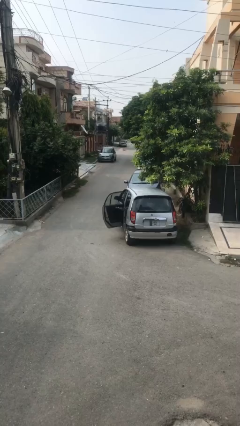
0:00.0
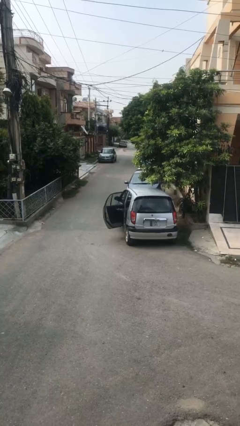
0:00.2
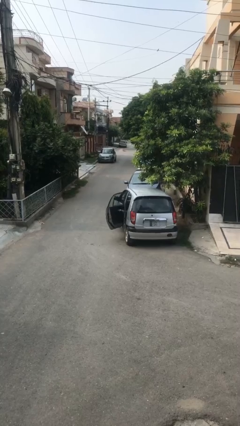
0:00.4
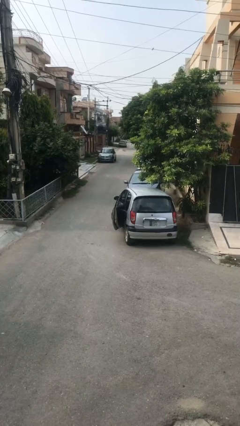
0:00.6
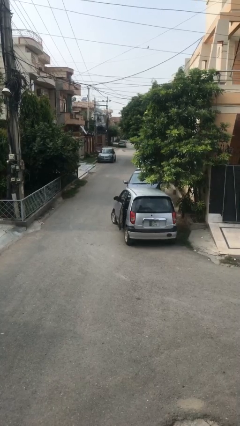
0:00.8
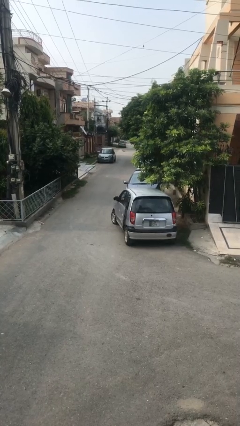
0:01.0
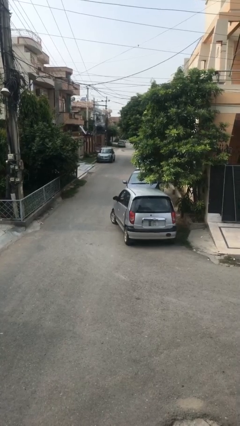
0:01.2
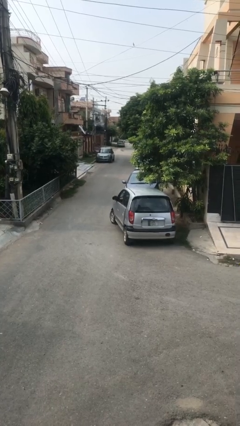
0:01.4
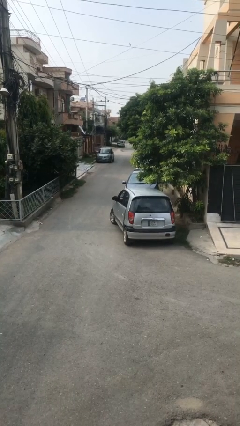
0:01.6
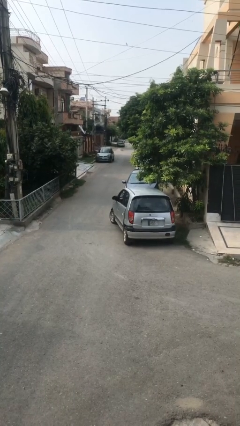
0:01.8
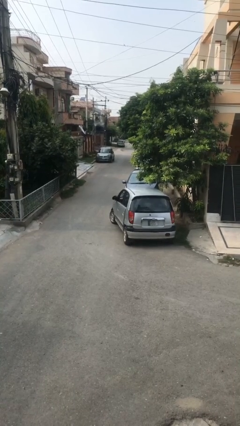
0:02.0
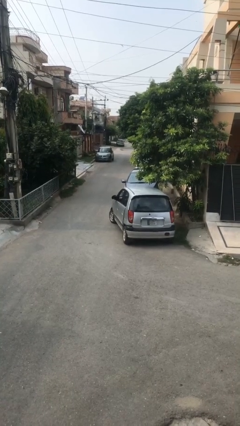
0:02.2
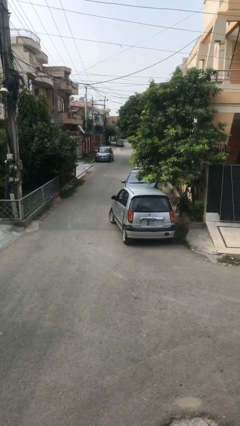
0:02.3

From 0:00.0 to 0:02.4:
person closes car door

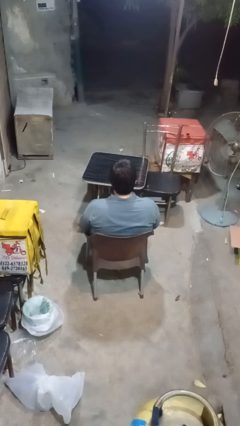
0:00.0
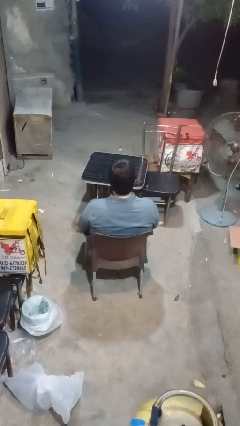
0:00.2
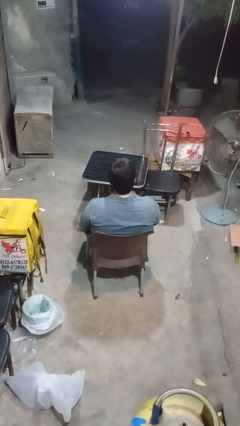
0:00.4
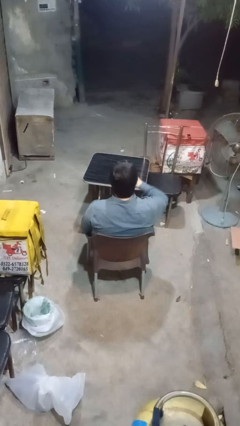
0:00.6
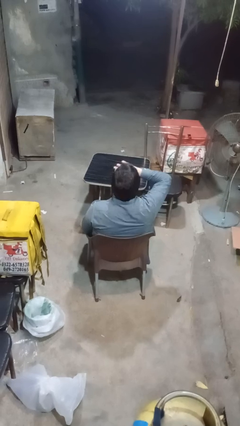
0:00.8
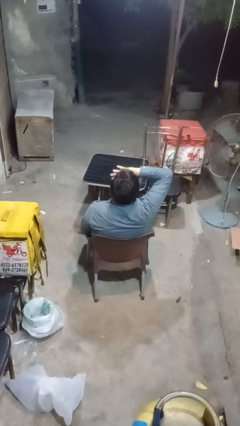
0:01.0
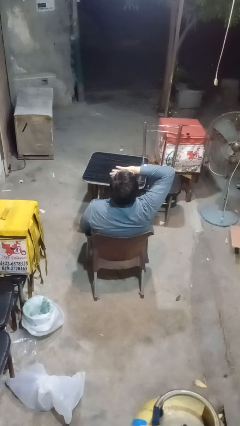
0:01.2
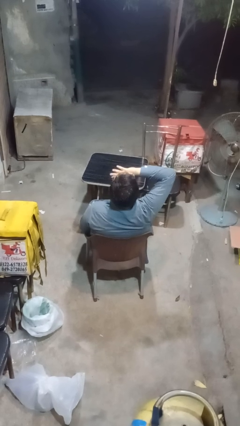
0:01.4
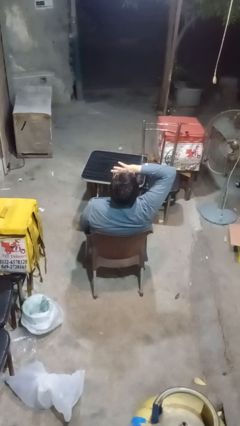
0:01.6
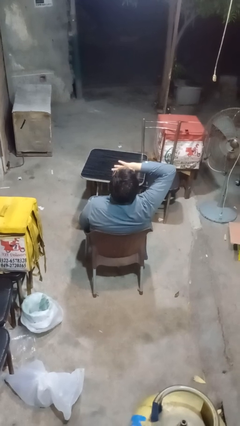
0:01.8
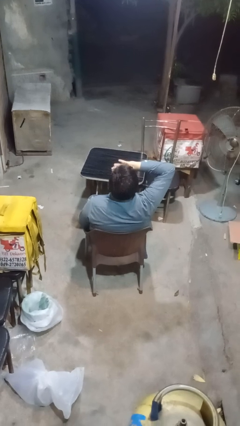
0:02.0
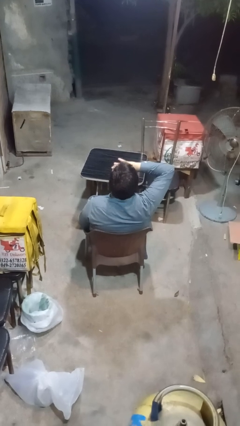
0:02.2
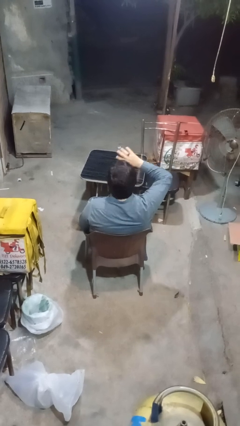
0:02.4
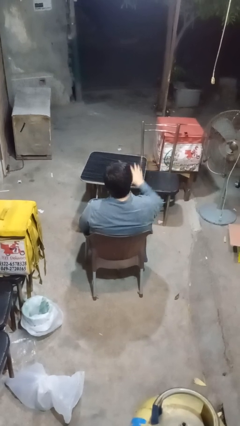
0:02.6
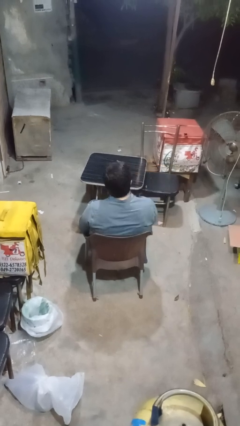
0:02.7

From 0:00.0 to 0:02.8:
person yawns

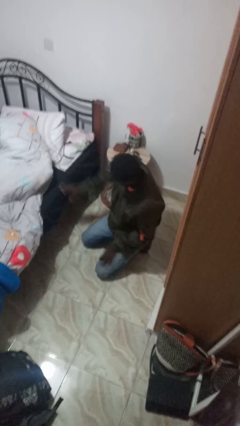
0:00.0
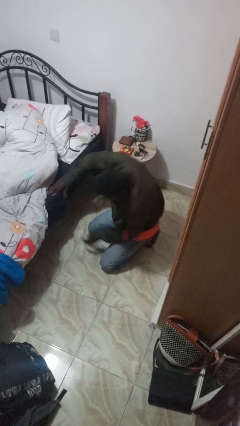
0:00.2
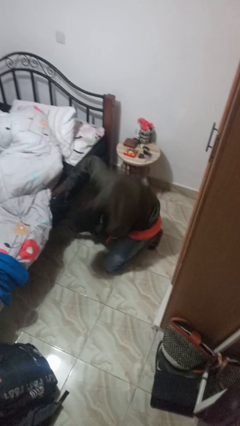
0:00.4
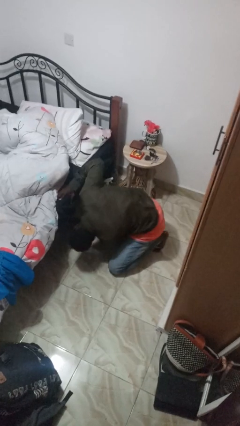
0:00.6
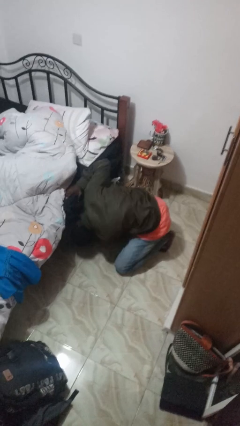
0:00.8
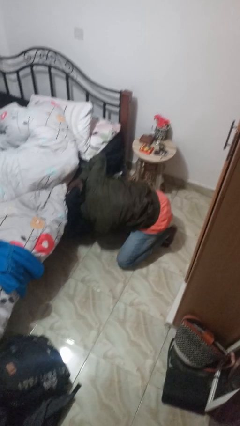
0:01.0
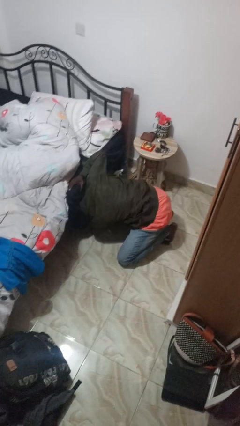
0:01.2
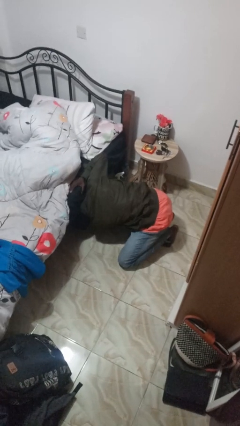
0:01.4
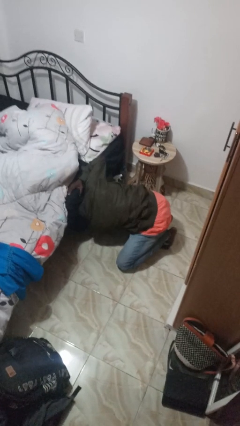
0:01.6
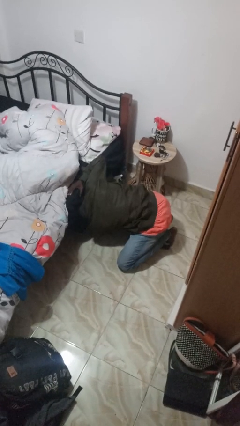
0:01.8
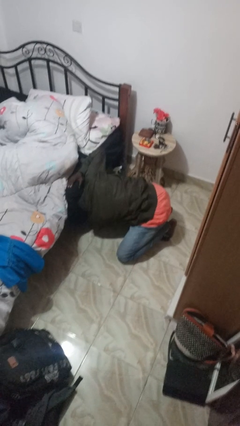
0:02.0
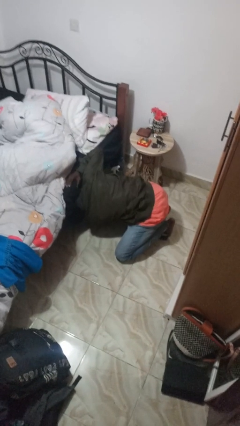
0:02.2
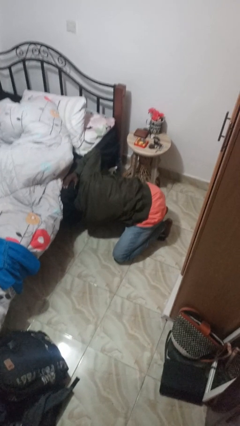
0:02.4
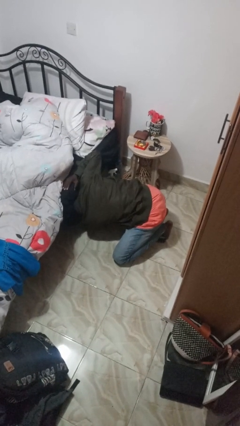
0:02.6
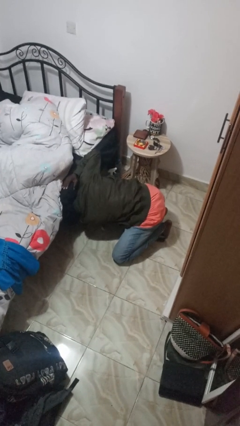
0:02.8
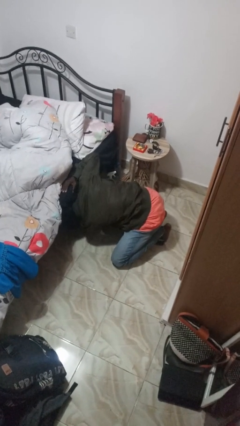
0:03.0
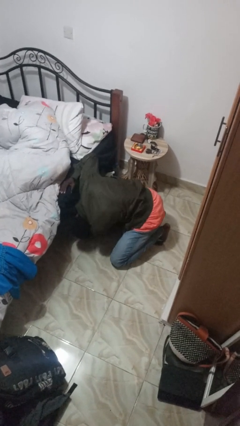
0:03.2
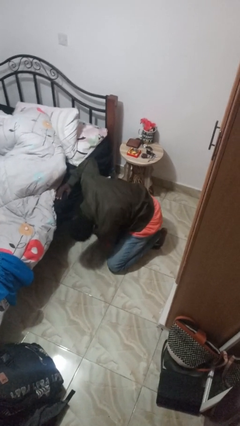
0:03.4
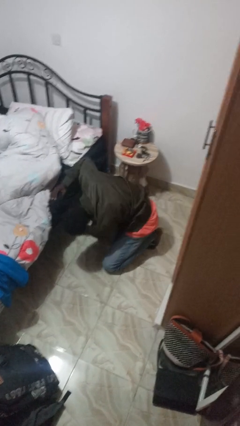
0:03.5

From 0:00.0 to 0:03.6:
person searches under bed

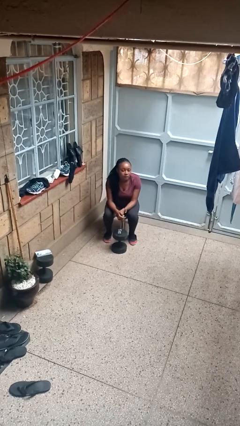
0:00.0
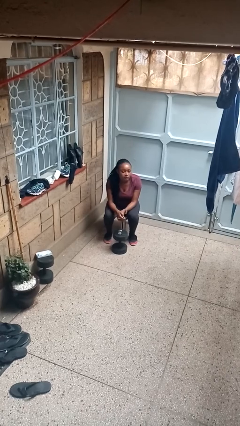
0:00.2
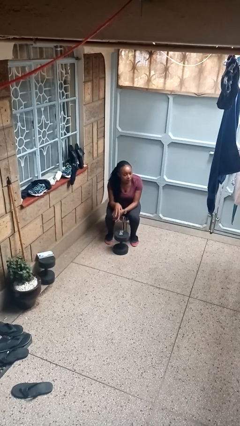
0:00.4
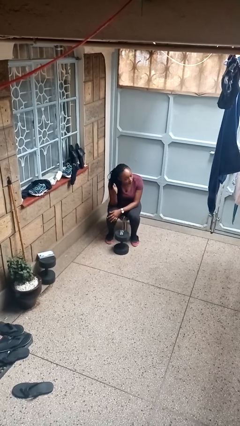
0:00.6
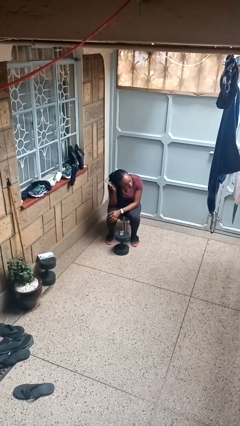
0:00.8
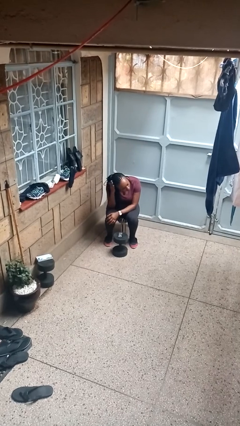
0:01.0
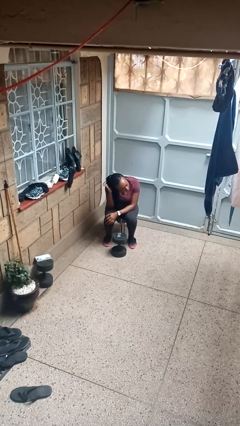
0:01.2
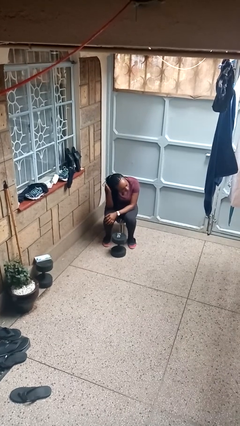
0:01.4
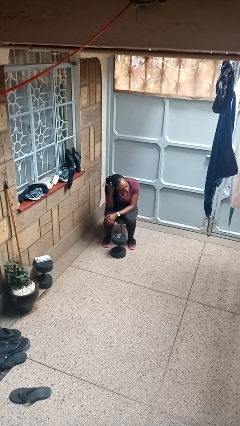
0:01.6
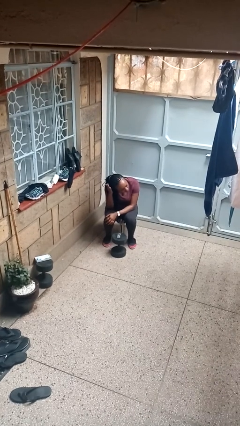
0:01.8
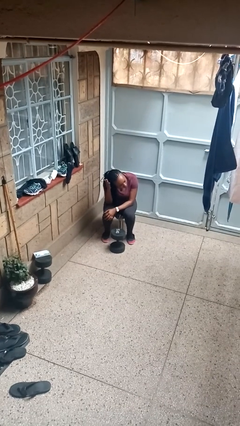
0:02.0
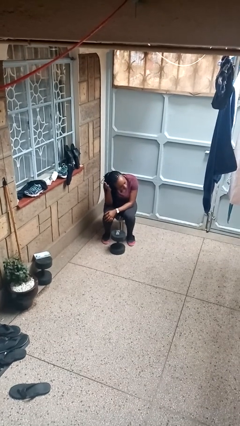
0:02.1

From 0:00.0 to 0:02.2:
person pats head

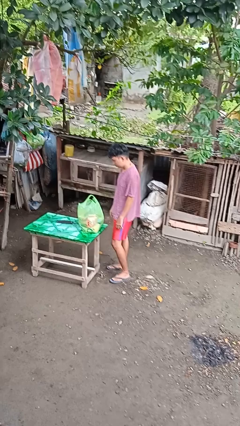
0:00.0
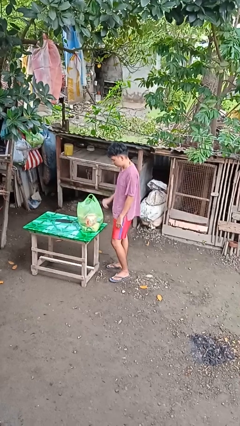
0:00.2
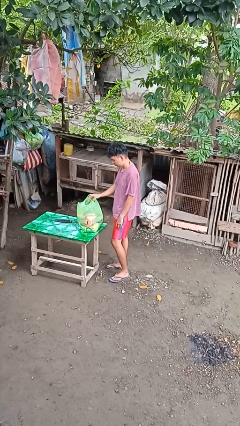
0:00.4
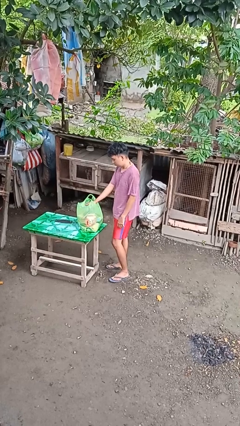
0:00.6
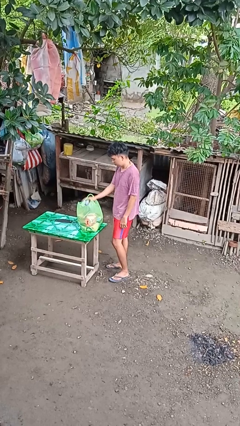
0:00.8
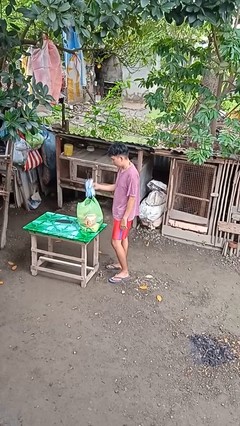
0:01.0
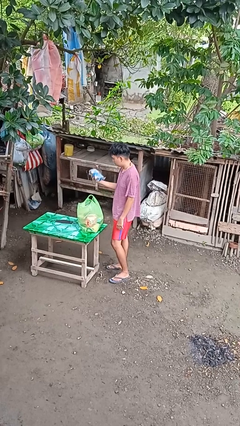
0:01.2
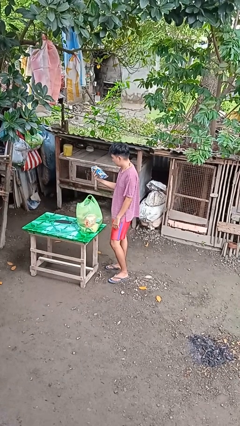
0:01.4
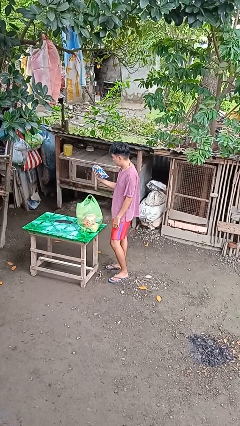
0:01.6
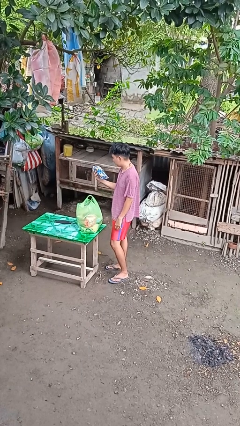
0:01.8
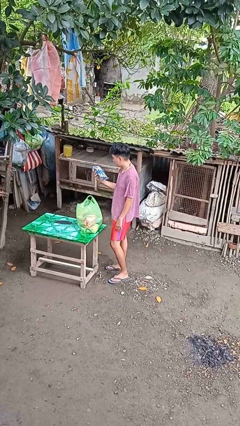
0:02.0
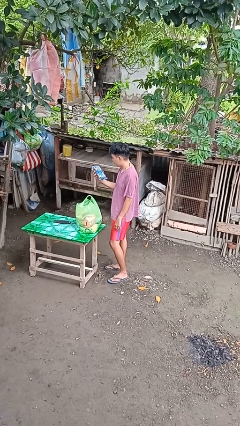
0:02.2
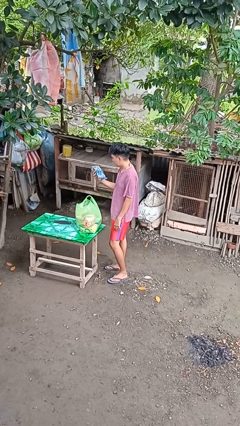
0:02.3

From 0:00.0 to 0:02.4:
person takes object from bag

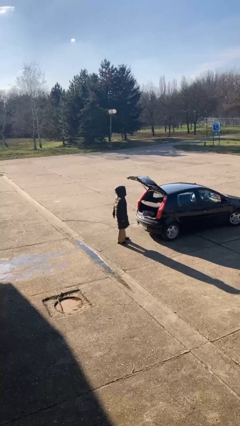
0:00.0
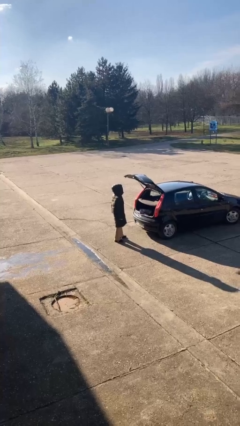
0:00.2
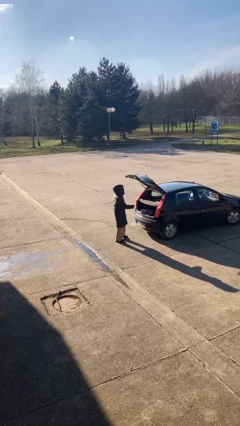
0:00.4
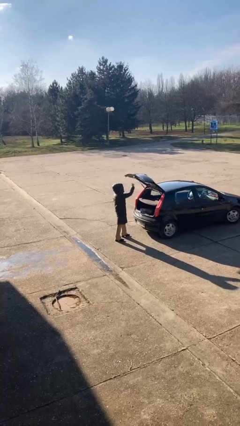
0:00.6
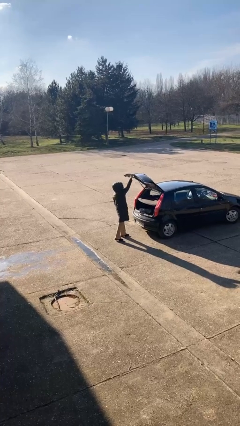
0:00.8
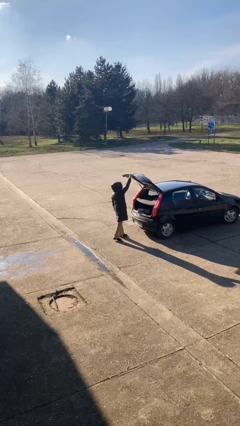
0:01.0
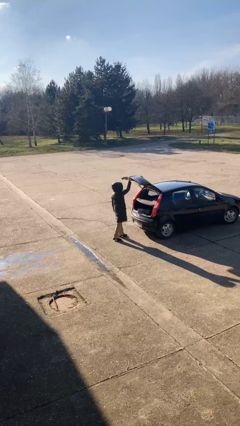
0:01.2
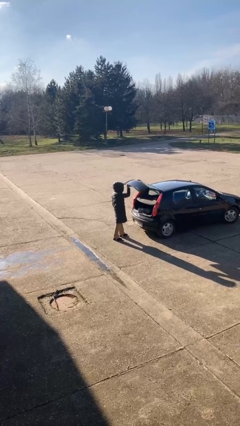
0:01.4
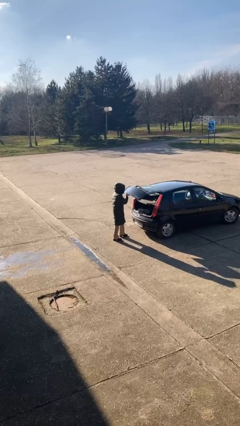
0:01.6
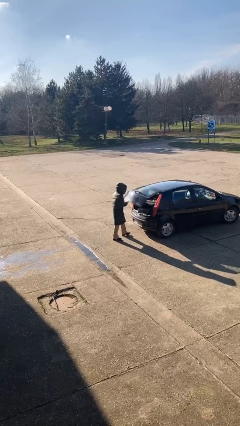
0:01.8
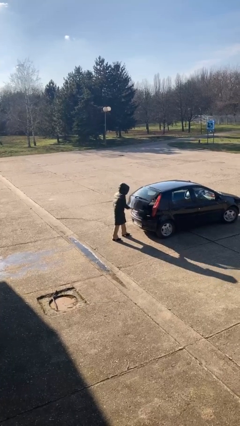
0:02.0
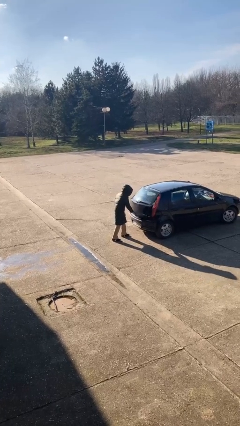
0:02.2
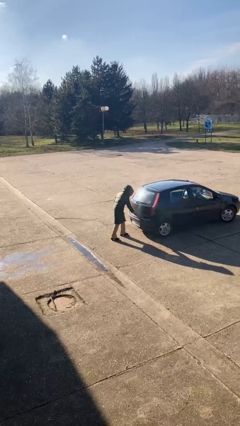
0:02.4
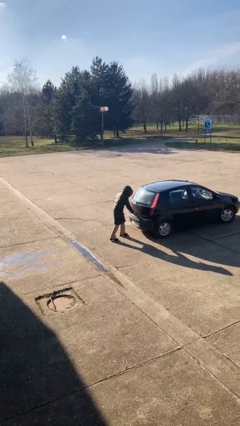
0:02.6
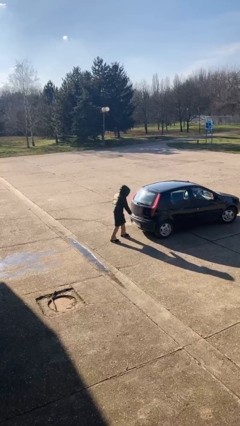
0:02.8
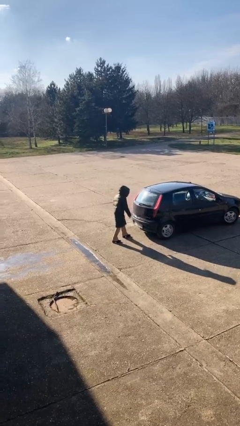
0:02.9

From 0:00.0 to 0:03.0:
person closes car trunk

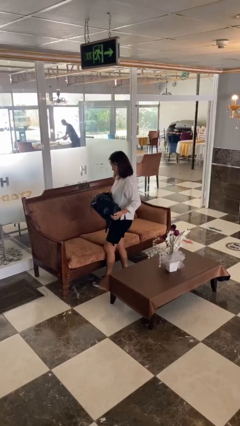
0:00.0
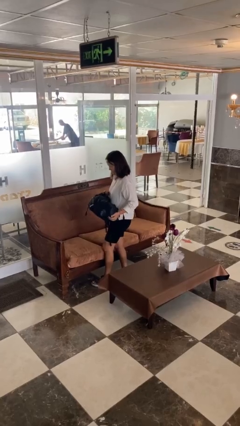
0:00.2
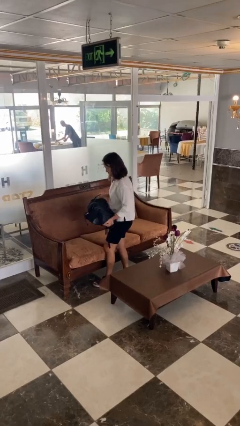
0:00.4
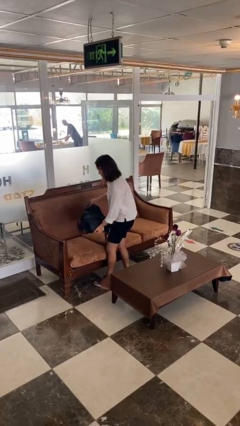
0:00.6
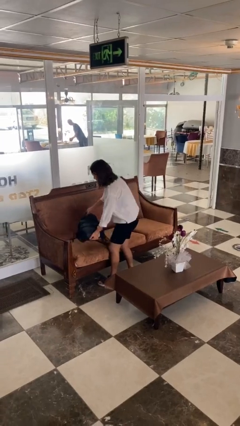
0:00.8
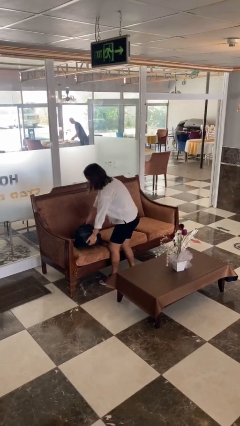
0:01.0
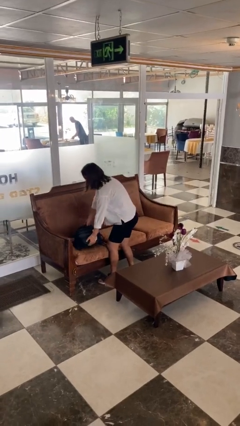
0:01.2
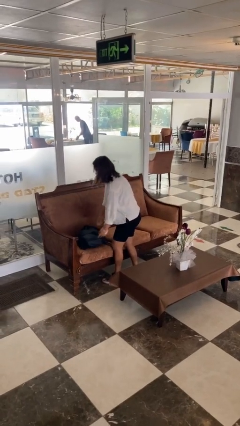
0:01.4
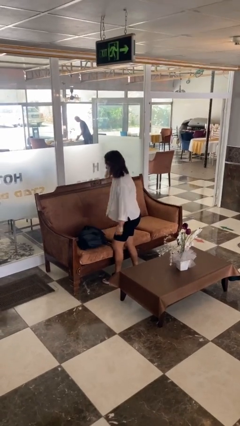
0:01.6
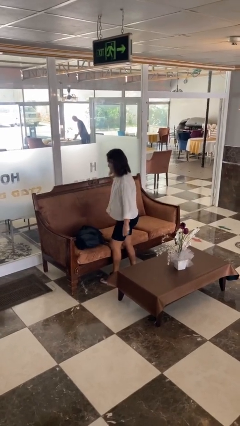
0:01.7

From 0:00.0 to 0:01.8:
person puts down object on couch
